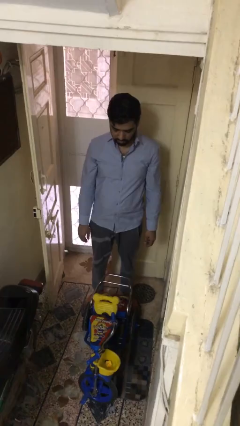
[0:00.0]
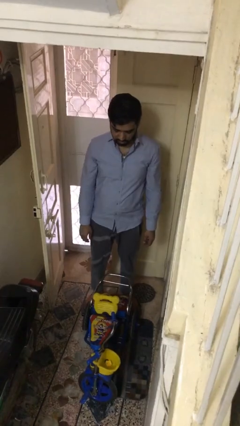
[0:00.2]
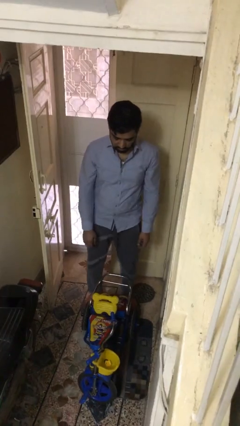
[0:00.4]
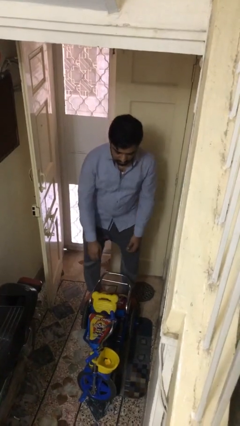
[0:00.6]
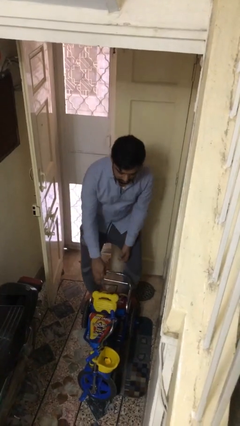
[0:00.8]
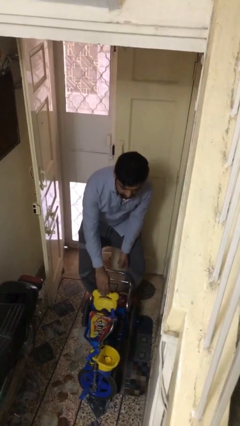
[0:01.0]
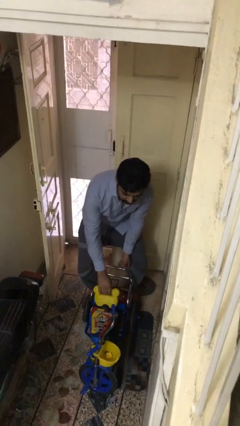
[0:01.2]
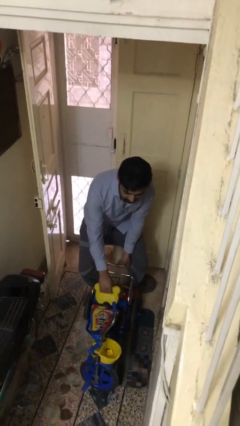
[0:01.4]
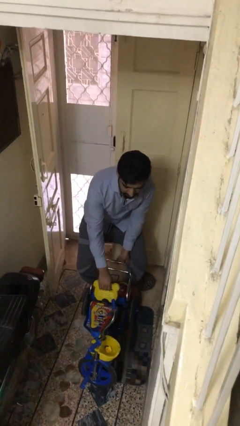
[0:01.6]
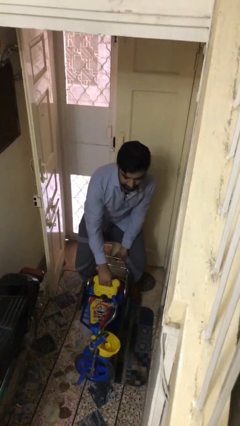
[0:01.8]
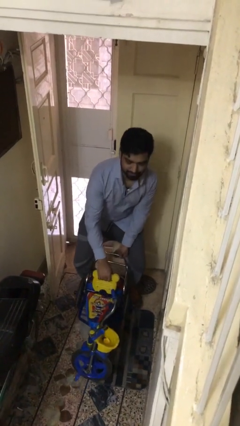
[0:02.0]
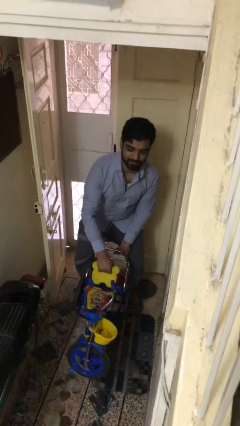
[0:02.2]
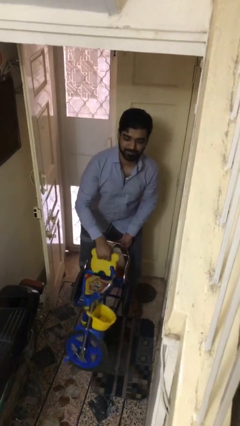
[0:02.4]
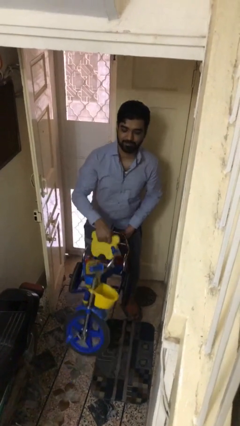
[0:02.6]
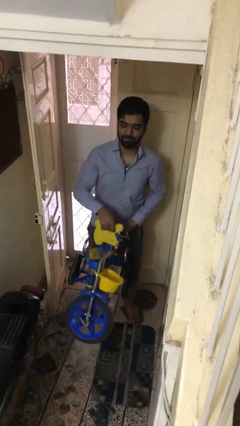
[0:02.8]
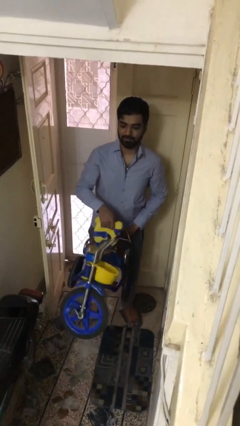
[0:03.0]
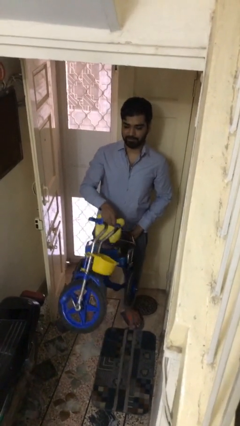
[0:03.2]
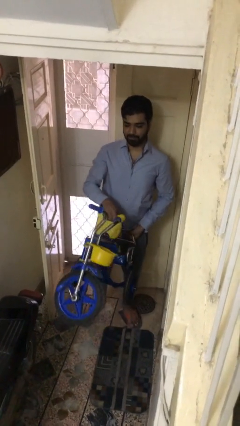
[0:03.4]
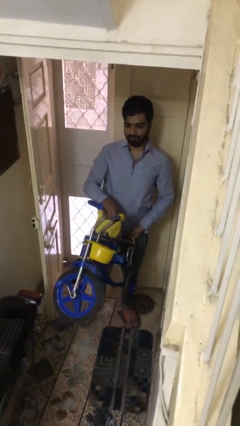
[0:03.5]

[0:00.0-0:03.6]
person picks up object from floor

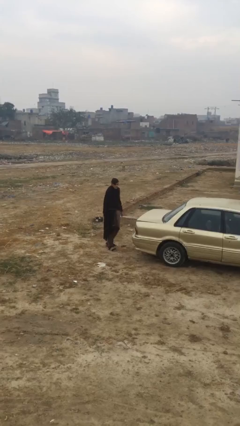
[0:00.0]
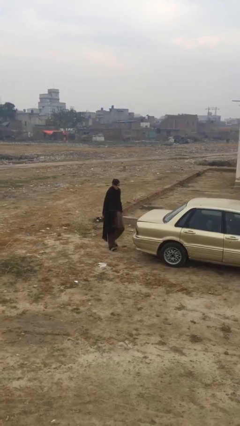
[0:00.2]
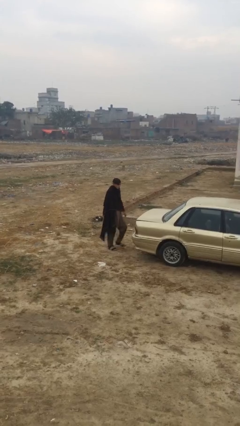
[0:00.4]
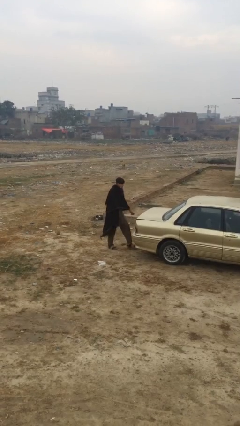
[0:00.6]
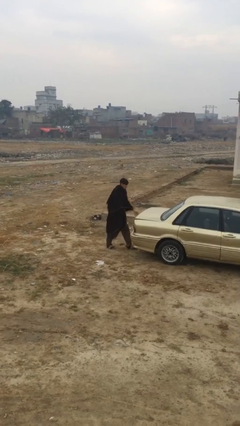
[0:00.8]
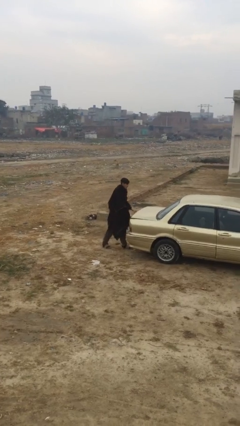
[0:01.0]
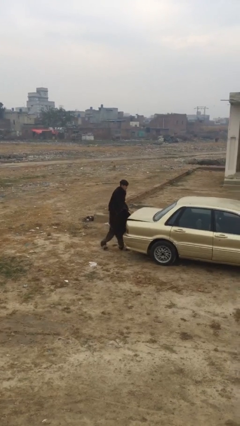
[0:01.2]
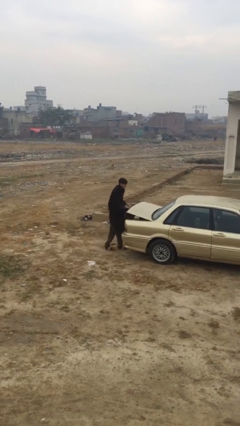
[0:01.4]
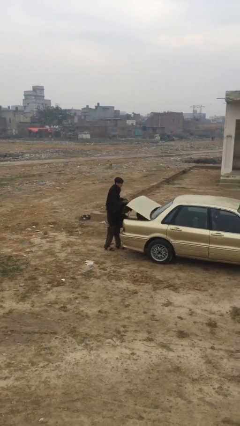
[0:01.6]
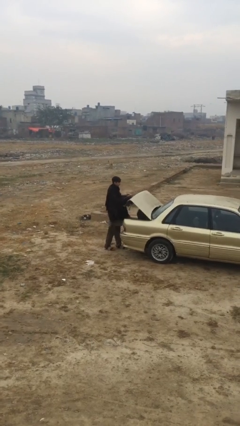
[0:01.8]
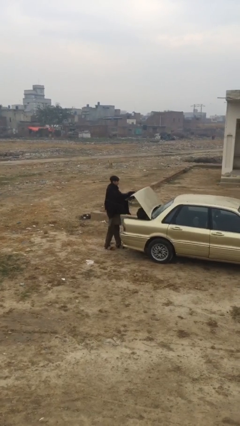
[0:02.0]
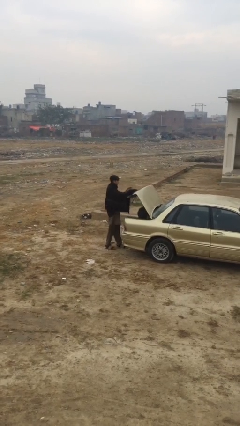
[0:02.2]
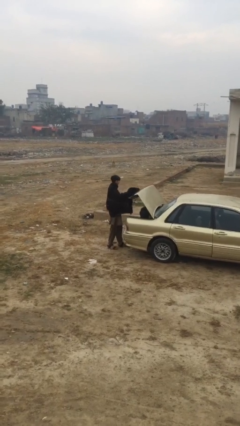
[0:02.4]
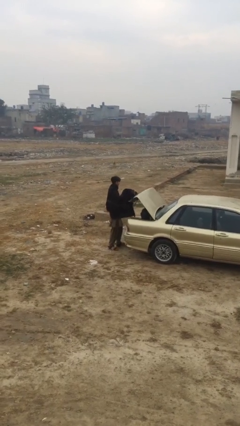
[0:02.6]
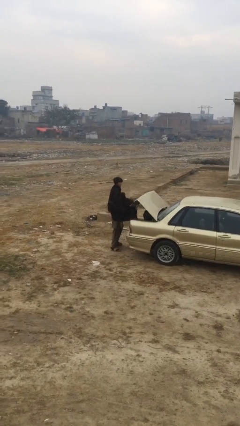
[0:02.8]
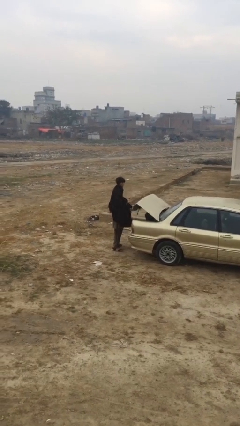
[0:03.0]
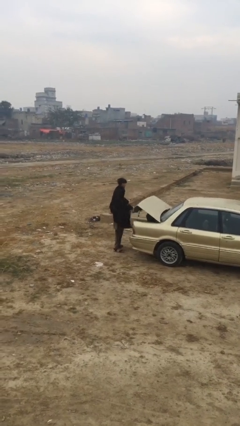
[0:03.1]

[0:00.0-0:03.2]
person opens car trunk

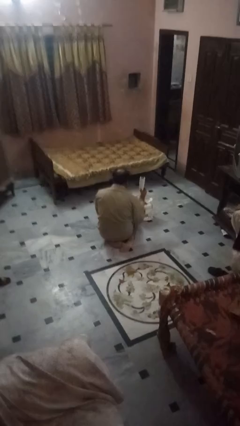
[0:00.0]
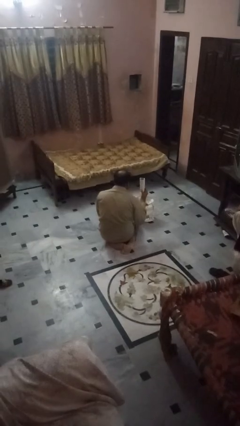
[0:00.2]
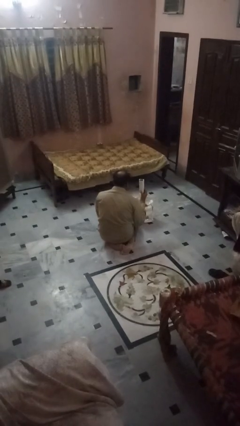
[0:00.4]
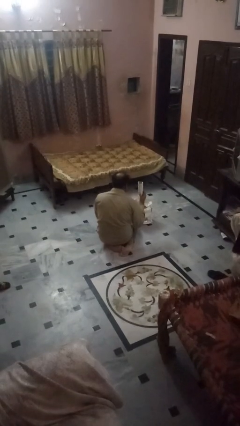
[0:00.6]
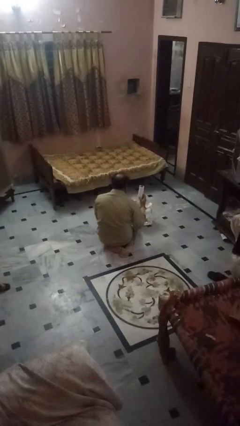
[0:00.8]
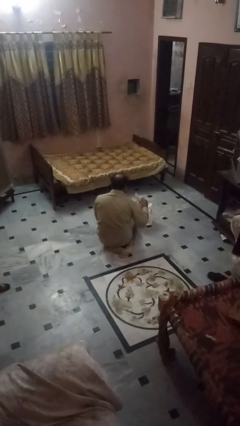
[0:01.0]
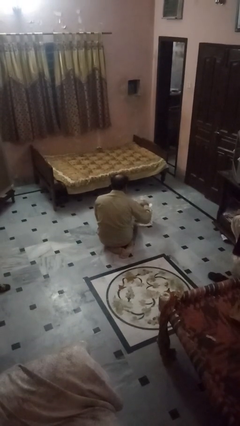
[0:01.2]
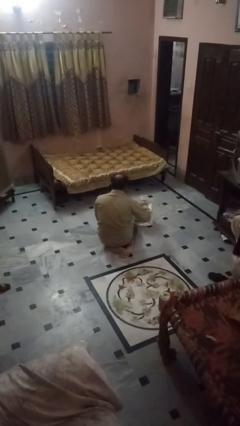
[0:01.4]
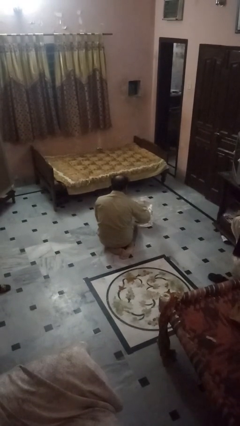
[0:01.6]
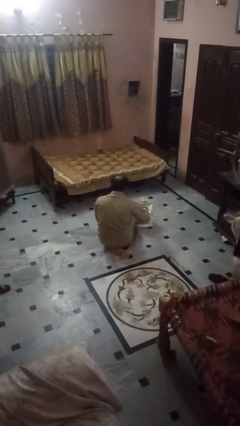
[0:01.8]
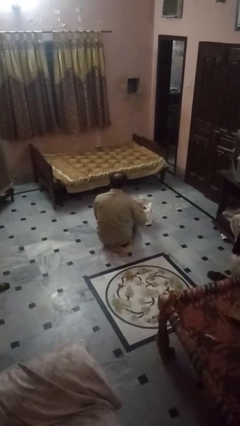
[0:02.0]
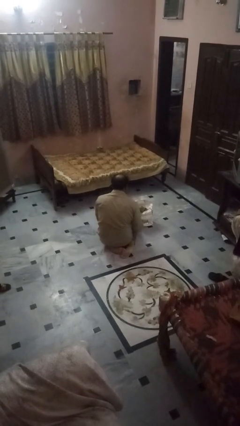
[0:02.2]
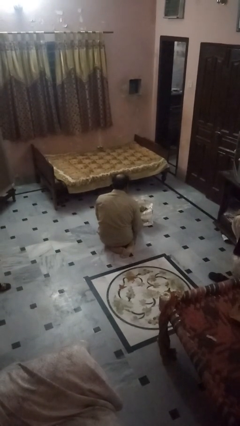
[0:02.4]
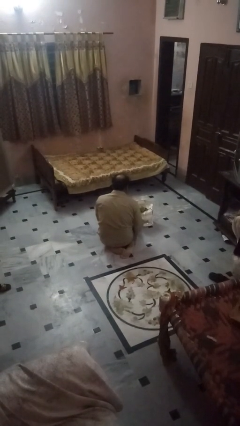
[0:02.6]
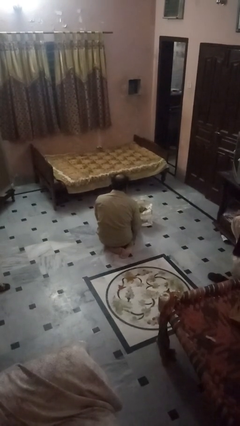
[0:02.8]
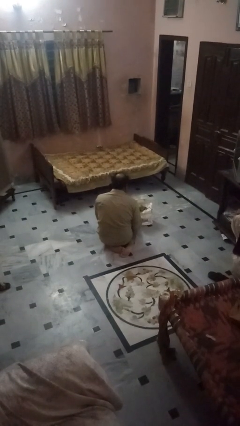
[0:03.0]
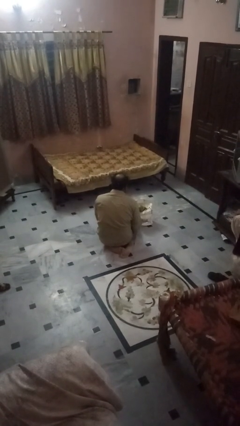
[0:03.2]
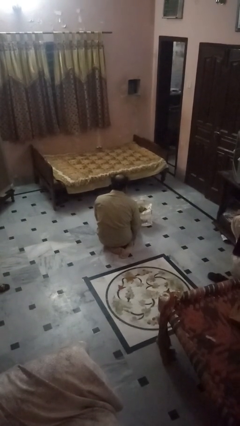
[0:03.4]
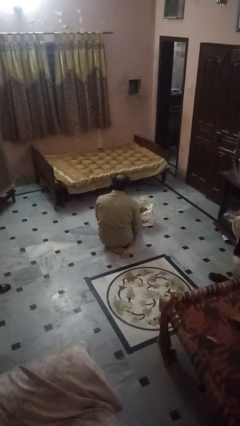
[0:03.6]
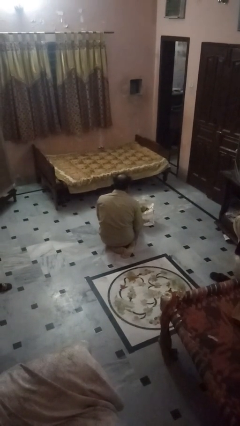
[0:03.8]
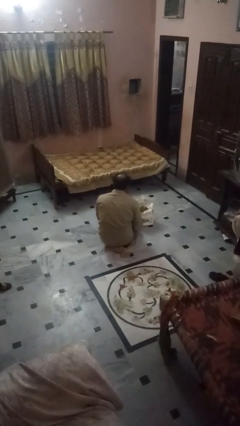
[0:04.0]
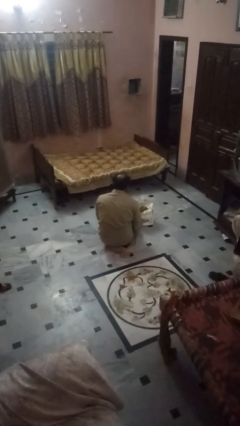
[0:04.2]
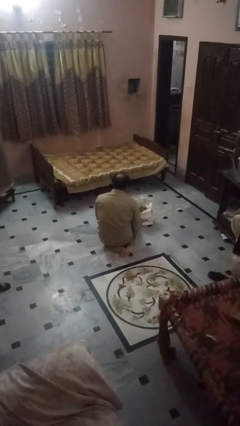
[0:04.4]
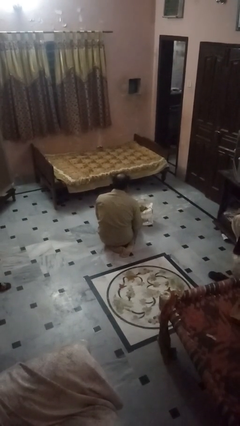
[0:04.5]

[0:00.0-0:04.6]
person puts object into bag

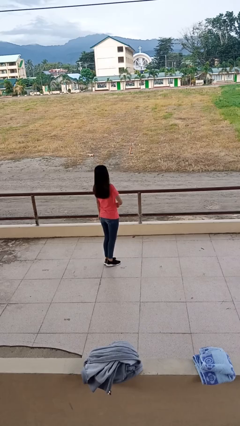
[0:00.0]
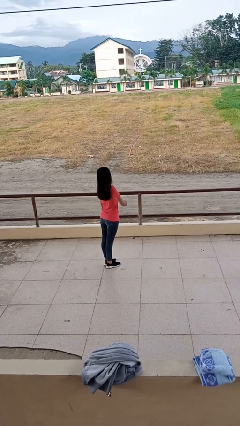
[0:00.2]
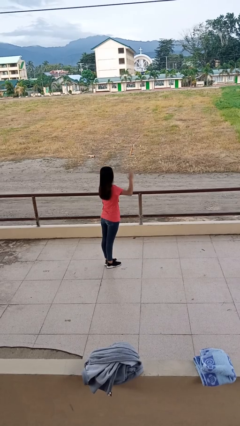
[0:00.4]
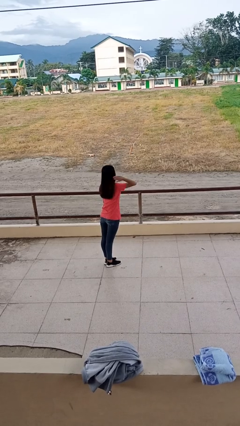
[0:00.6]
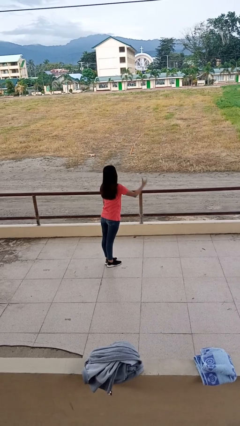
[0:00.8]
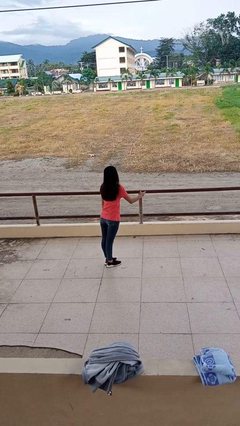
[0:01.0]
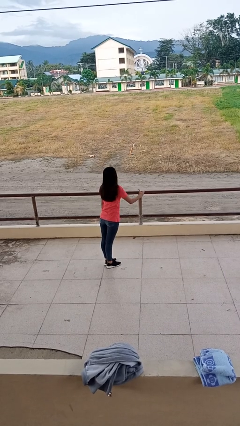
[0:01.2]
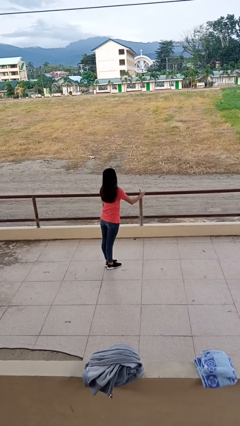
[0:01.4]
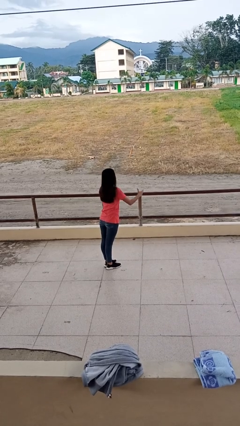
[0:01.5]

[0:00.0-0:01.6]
person karate chop

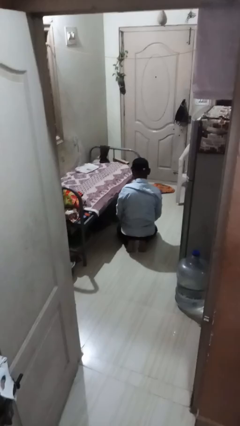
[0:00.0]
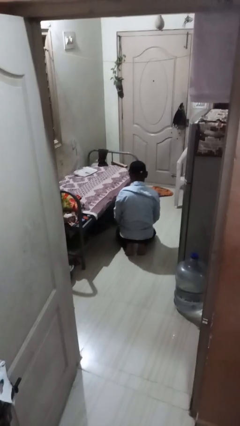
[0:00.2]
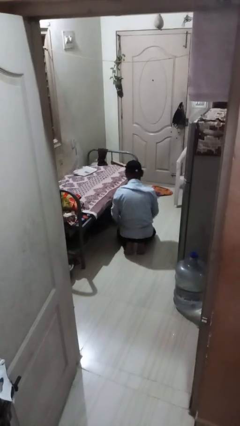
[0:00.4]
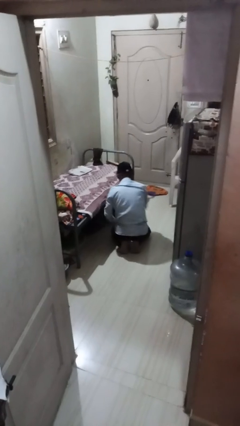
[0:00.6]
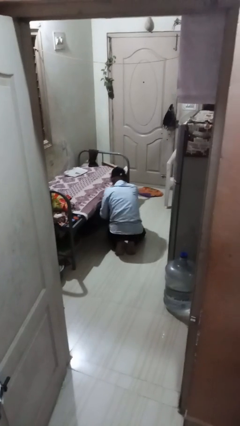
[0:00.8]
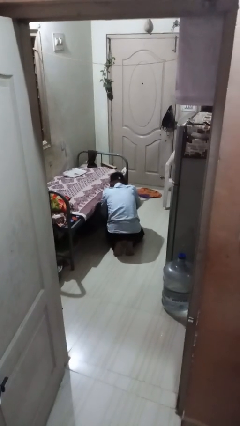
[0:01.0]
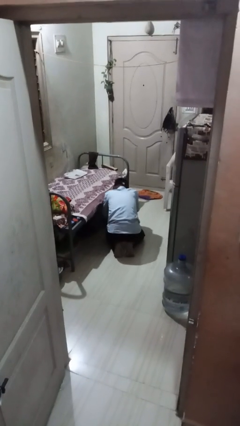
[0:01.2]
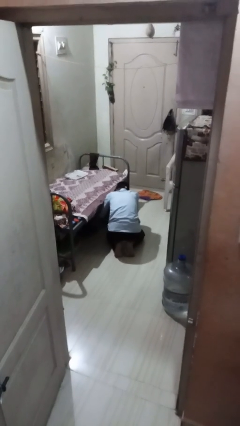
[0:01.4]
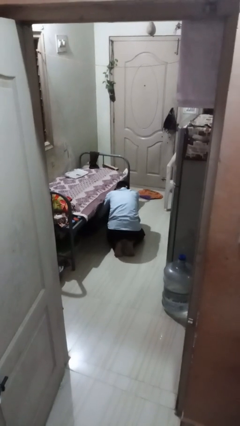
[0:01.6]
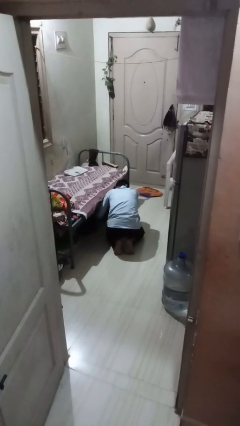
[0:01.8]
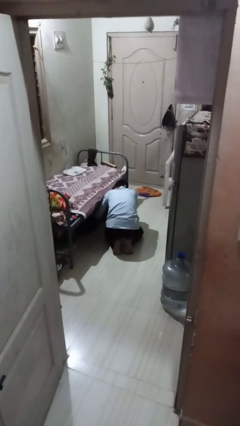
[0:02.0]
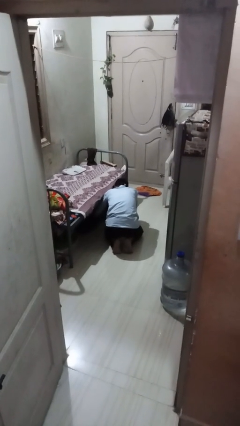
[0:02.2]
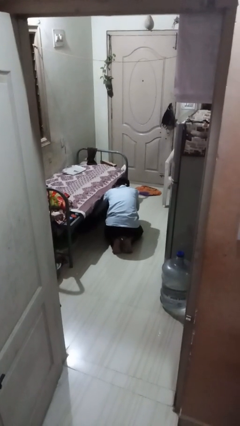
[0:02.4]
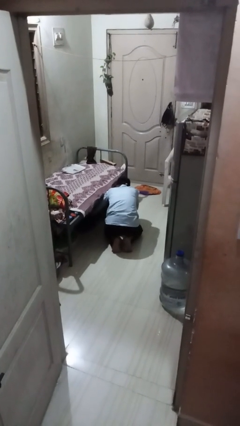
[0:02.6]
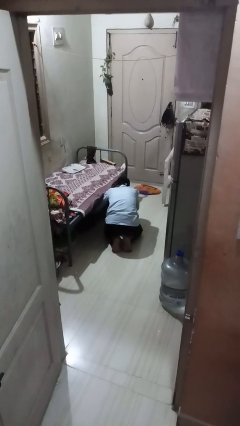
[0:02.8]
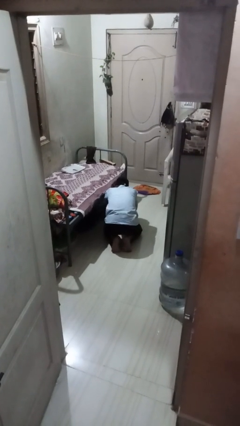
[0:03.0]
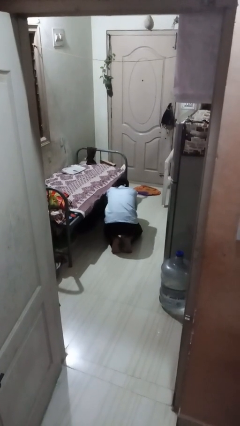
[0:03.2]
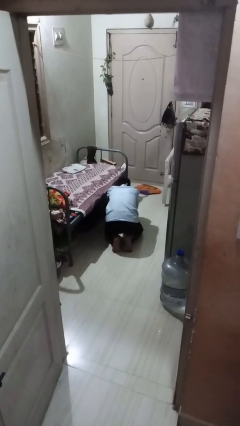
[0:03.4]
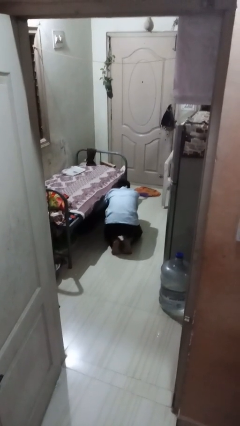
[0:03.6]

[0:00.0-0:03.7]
person searches under bed

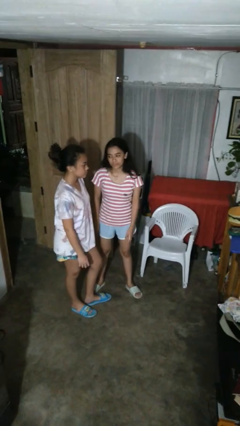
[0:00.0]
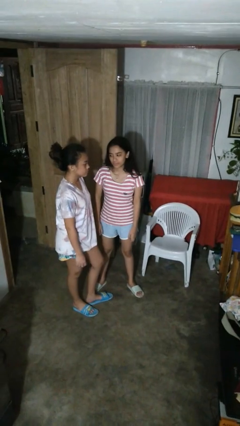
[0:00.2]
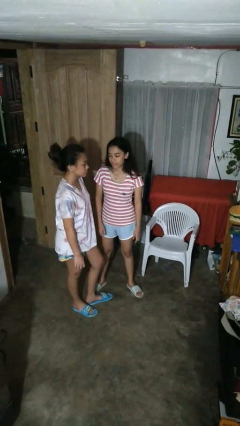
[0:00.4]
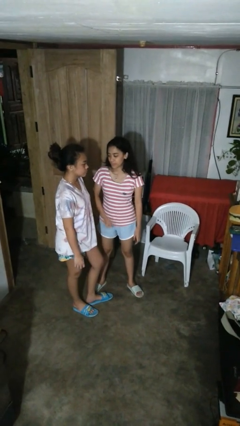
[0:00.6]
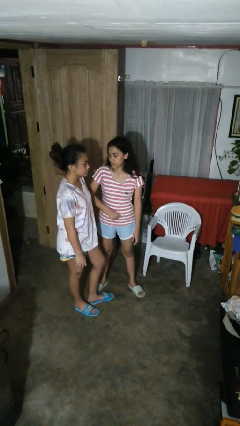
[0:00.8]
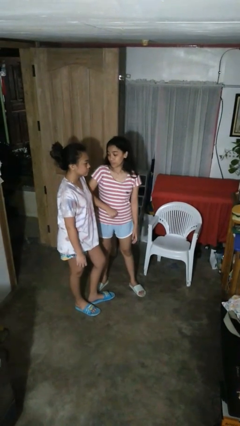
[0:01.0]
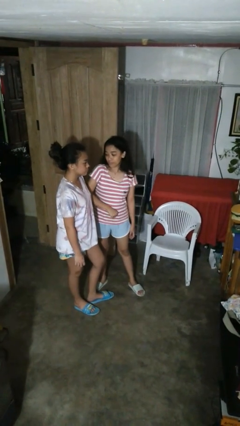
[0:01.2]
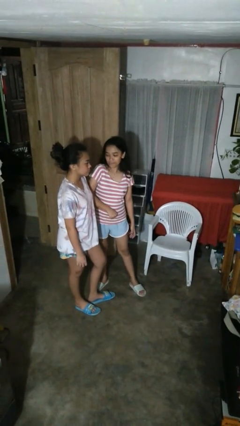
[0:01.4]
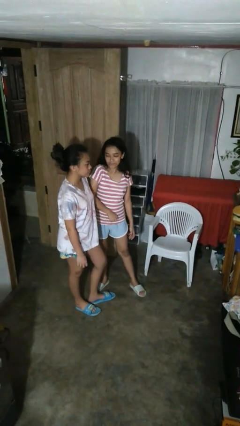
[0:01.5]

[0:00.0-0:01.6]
person nudges person with elbow
